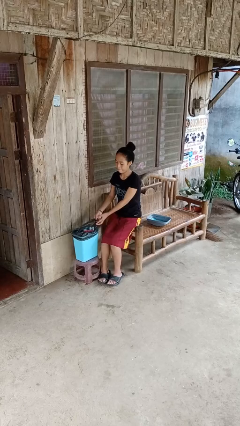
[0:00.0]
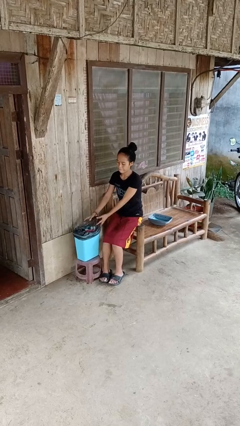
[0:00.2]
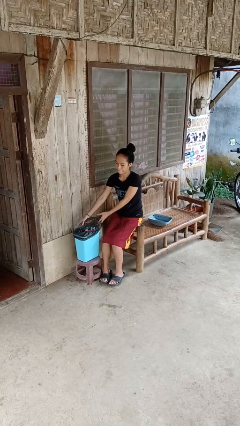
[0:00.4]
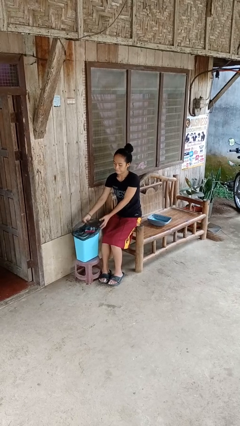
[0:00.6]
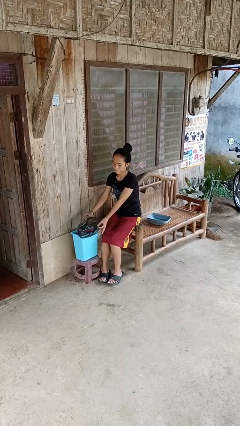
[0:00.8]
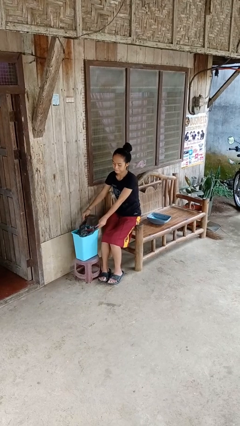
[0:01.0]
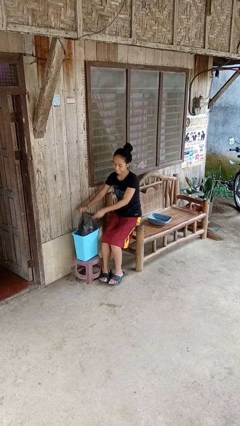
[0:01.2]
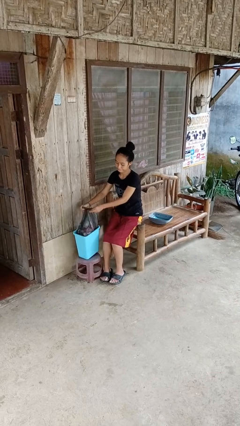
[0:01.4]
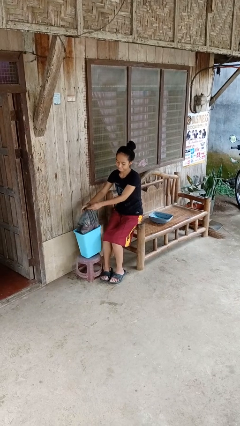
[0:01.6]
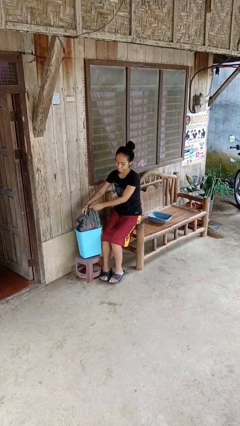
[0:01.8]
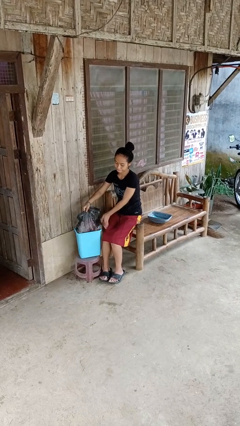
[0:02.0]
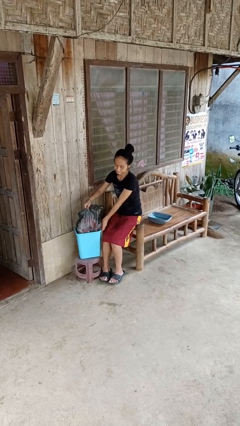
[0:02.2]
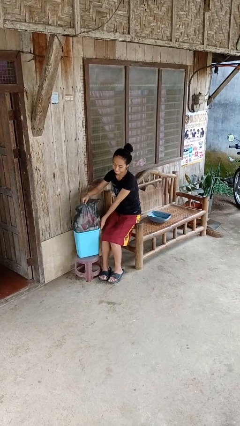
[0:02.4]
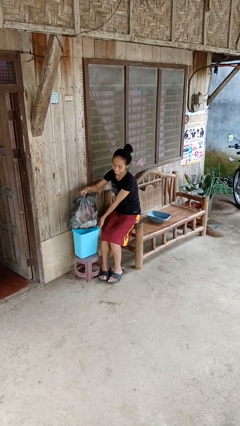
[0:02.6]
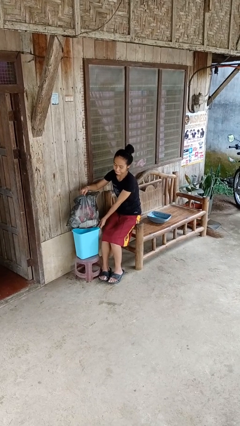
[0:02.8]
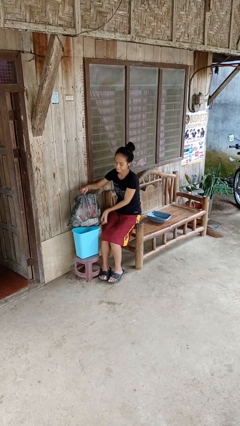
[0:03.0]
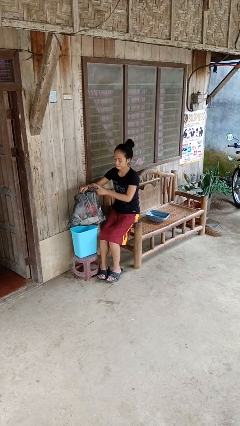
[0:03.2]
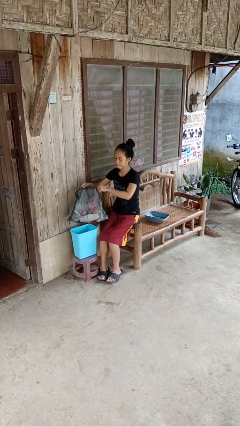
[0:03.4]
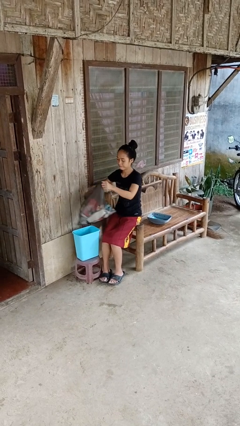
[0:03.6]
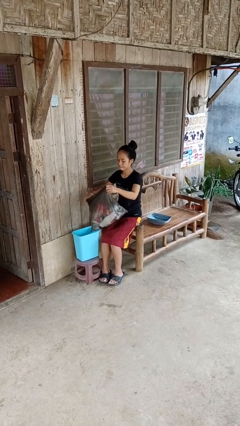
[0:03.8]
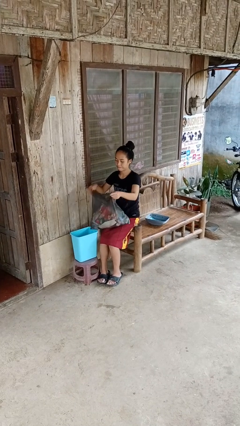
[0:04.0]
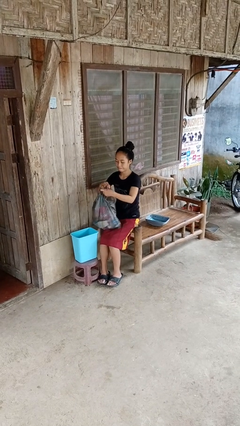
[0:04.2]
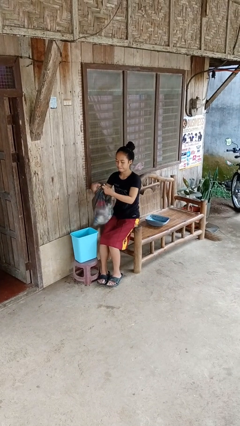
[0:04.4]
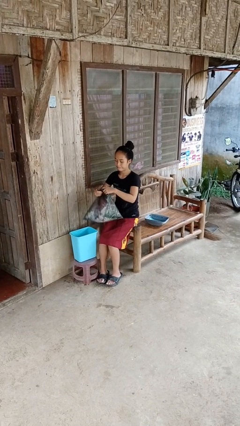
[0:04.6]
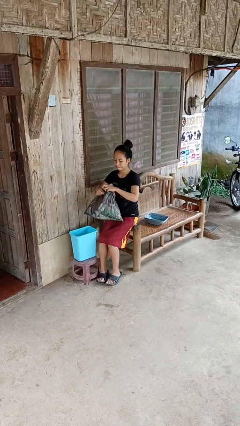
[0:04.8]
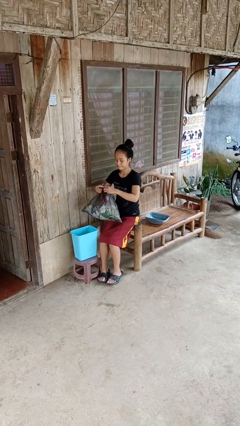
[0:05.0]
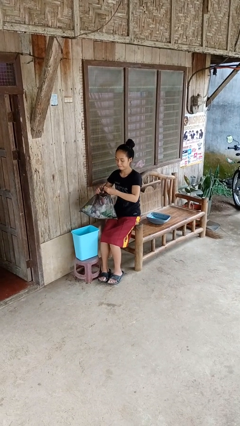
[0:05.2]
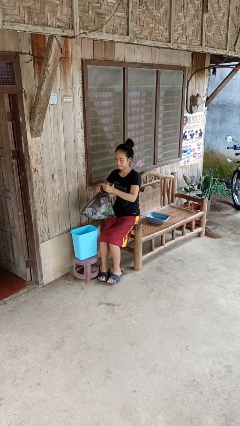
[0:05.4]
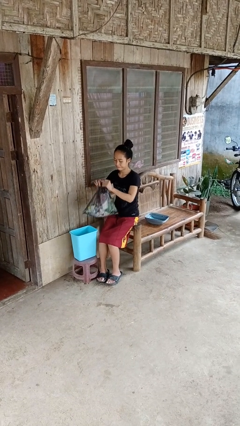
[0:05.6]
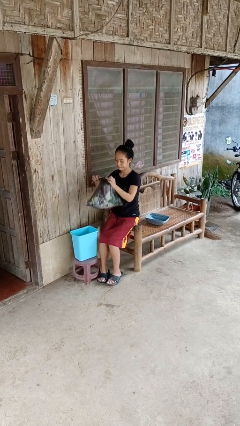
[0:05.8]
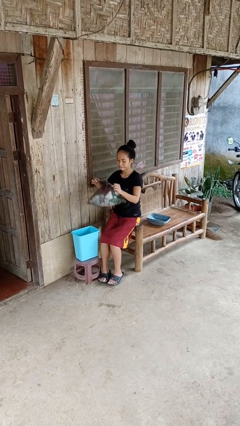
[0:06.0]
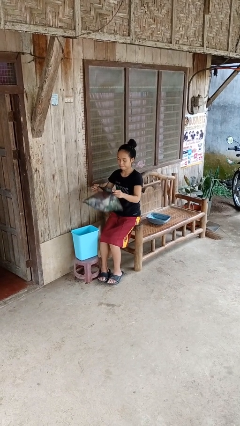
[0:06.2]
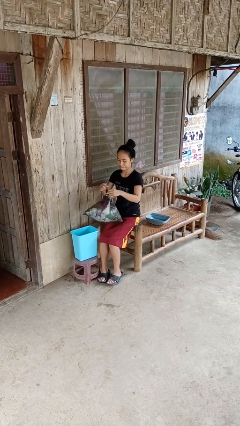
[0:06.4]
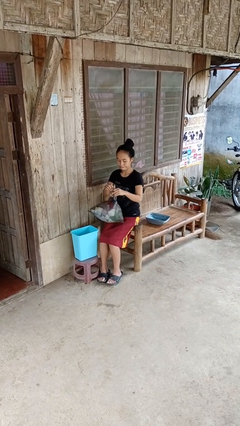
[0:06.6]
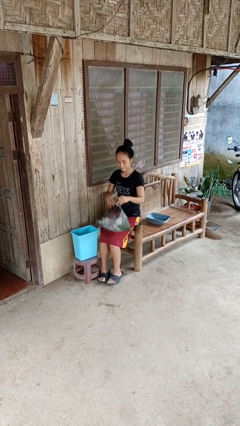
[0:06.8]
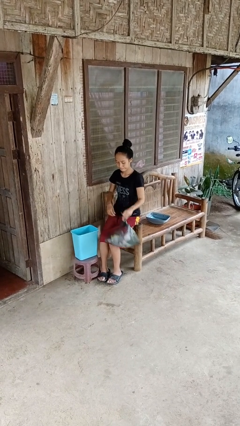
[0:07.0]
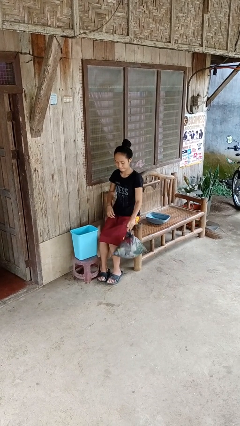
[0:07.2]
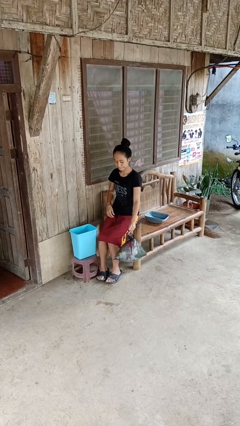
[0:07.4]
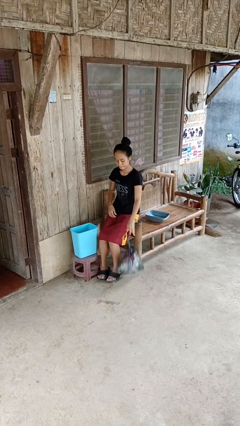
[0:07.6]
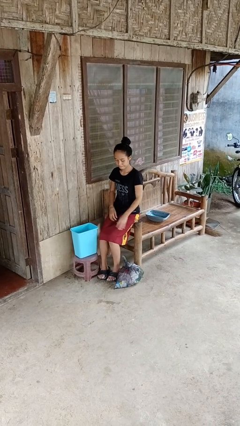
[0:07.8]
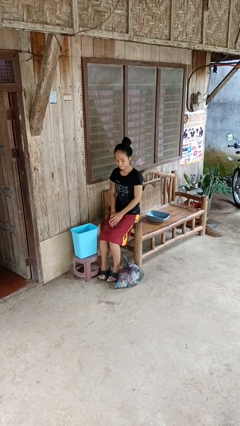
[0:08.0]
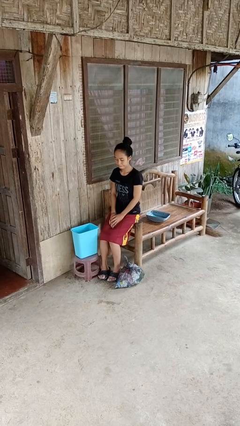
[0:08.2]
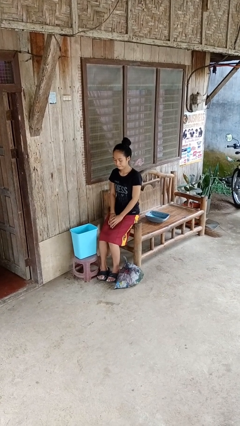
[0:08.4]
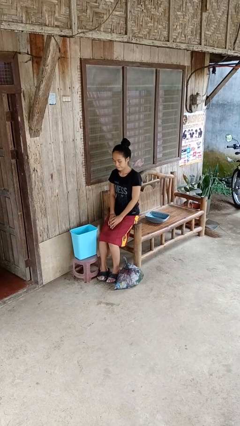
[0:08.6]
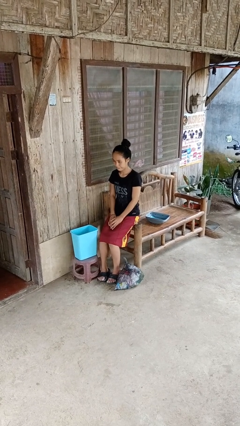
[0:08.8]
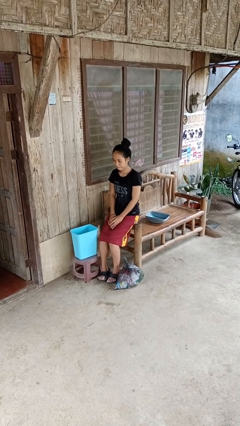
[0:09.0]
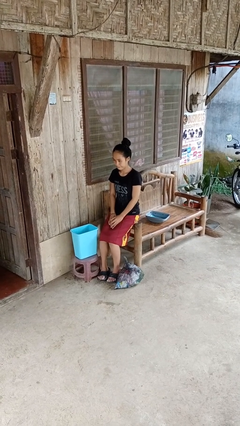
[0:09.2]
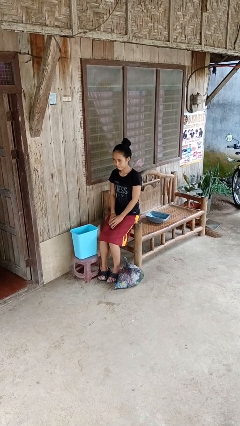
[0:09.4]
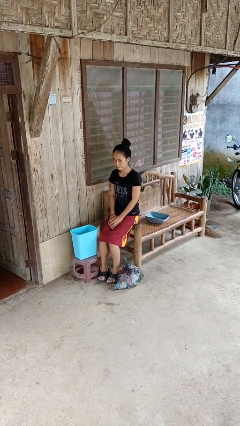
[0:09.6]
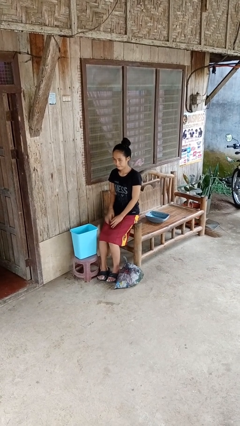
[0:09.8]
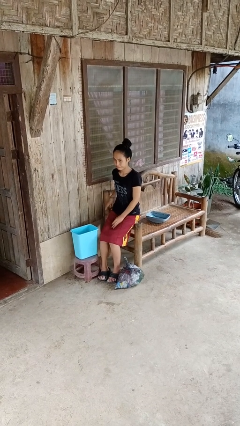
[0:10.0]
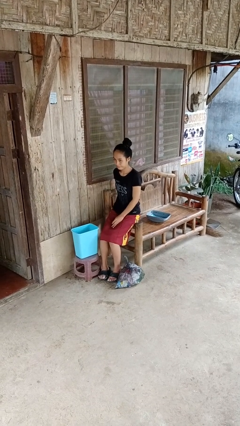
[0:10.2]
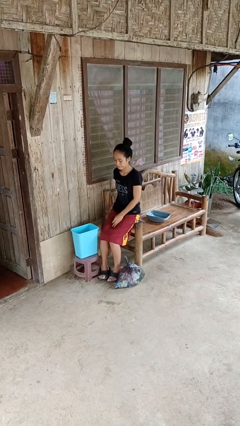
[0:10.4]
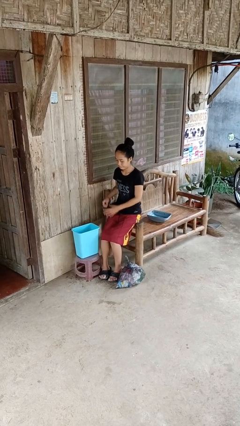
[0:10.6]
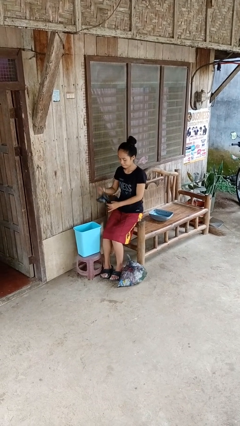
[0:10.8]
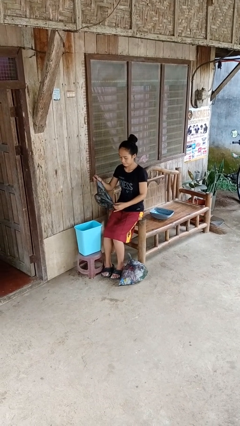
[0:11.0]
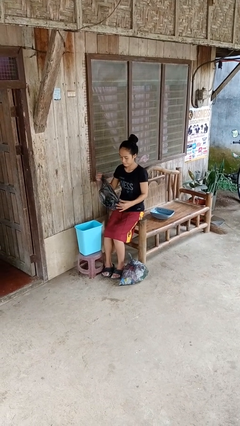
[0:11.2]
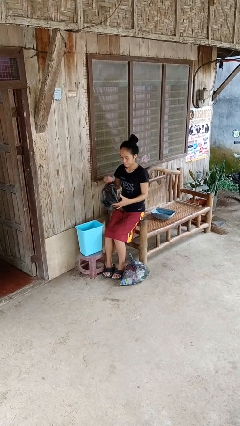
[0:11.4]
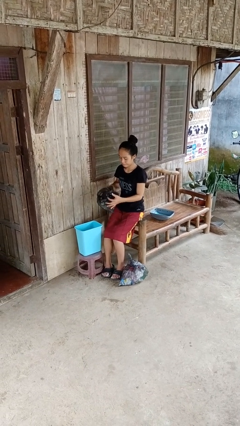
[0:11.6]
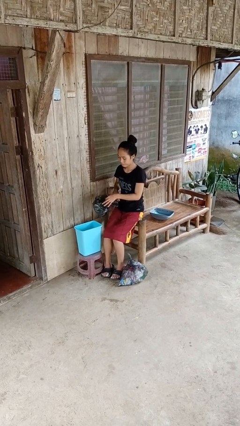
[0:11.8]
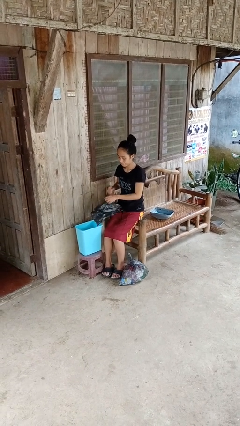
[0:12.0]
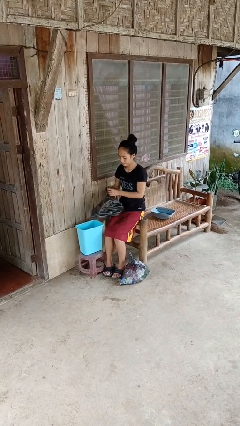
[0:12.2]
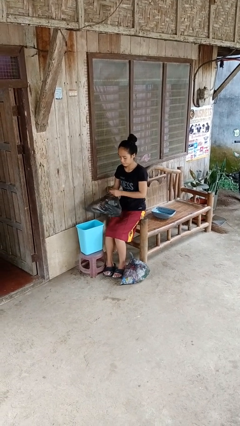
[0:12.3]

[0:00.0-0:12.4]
person removes trashbag from trashcan

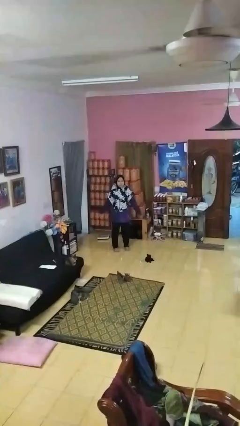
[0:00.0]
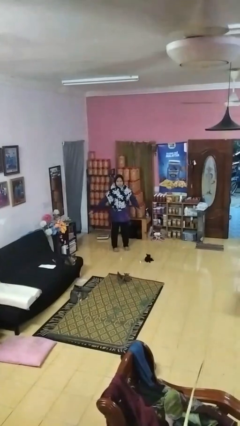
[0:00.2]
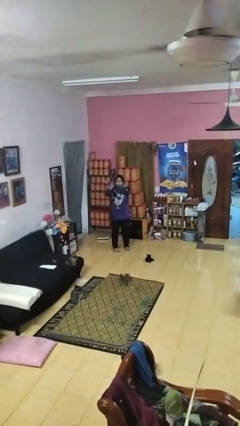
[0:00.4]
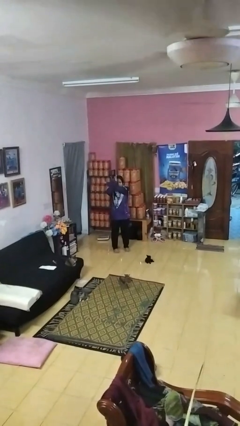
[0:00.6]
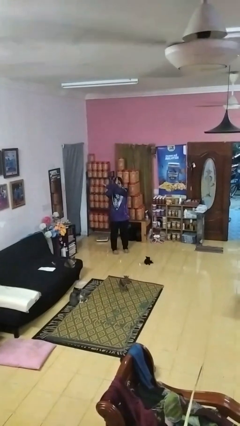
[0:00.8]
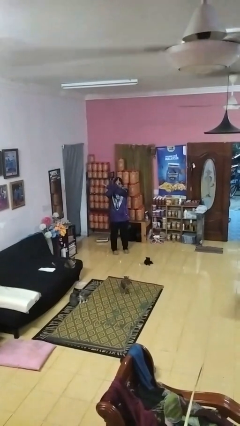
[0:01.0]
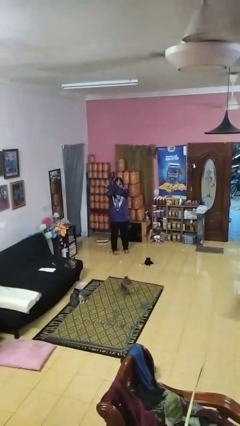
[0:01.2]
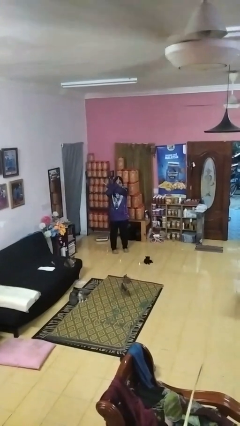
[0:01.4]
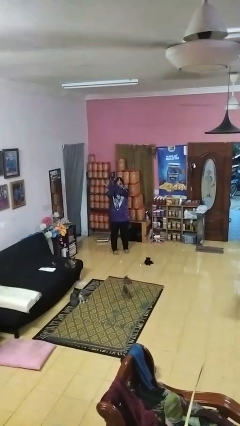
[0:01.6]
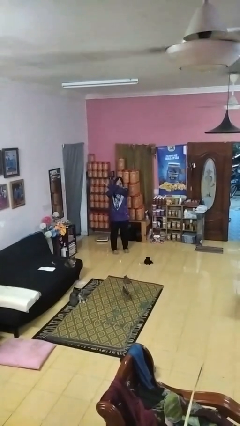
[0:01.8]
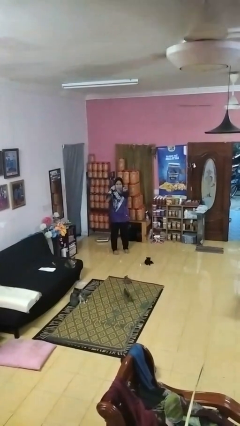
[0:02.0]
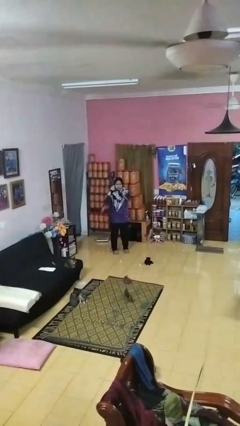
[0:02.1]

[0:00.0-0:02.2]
person gestures arms x

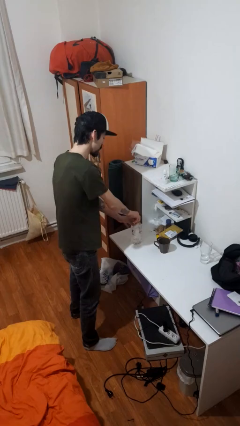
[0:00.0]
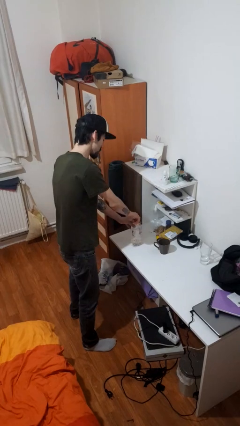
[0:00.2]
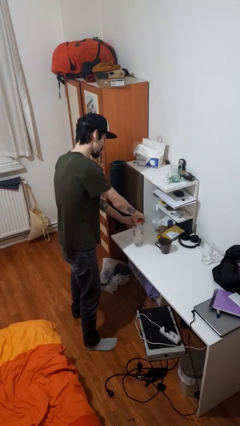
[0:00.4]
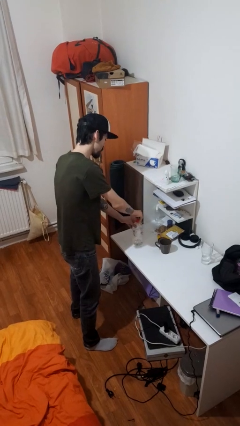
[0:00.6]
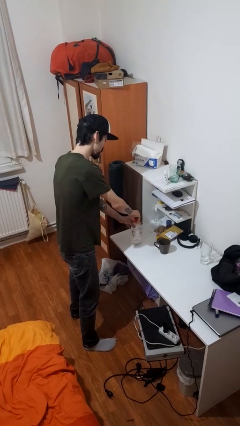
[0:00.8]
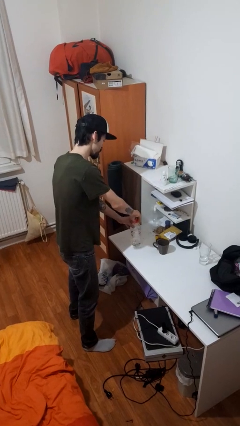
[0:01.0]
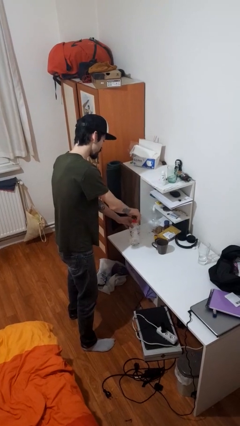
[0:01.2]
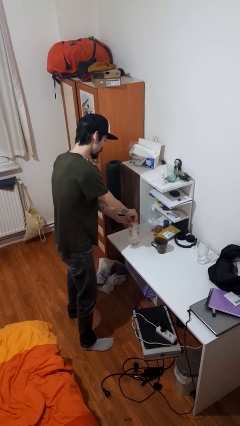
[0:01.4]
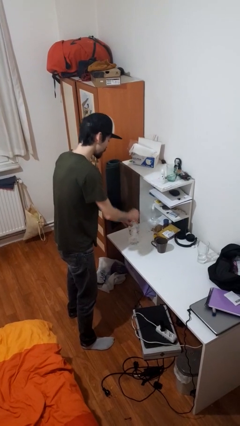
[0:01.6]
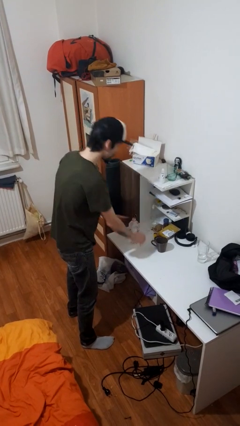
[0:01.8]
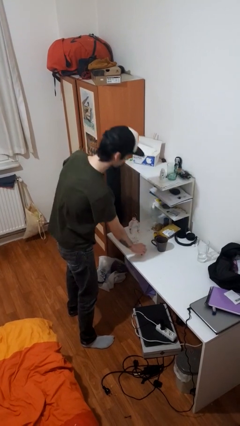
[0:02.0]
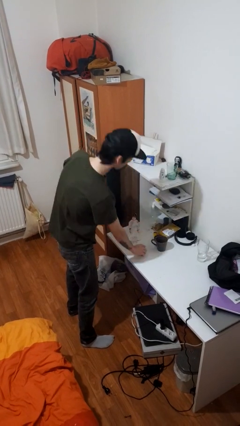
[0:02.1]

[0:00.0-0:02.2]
person unscrews lid from bottle

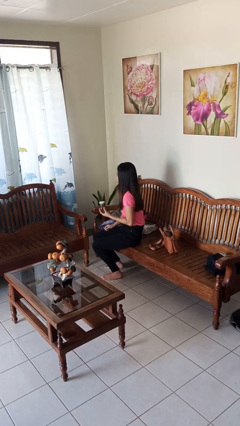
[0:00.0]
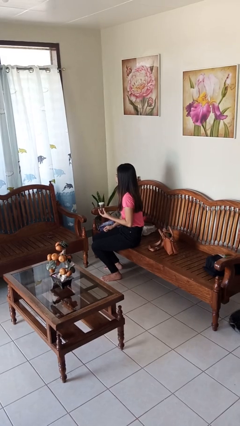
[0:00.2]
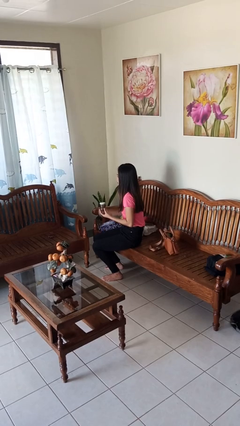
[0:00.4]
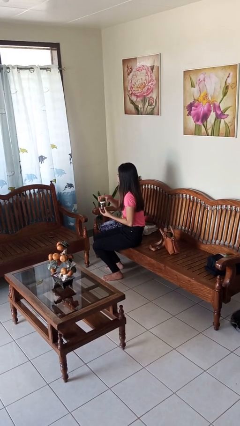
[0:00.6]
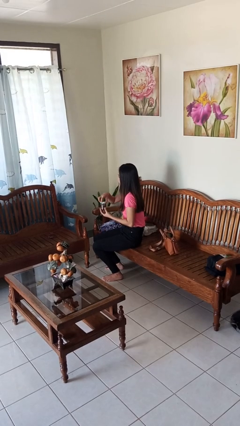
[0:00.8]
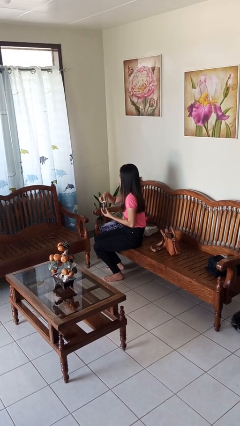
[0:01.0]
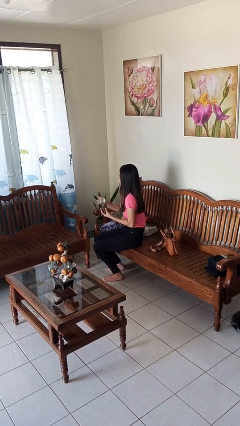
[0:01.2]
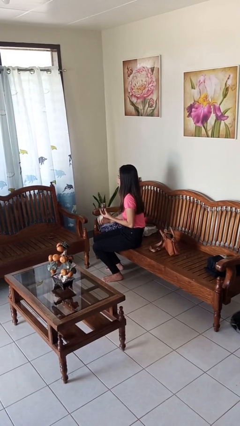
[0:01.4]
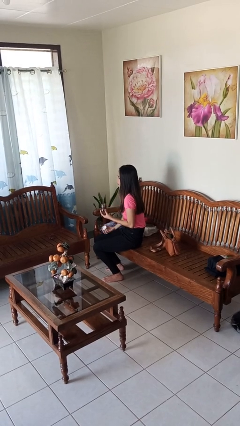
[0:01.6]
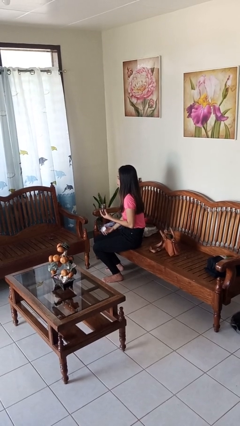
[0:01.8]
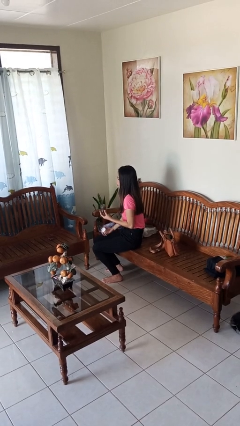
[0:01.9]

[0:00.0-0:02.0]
person opens jar
